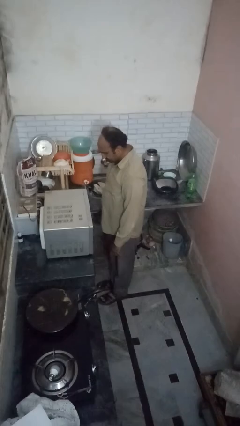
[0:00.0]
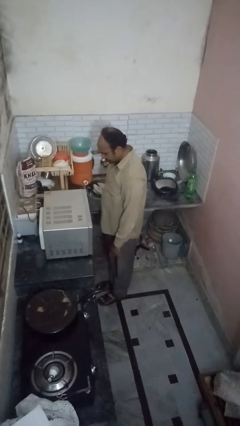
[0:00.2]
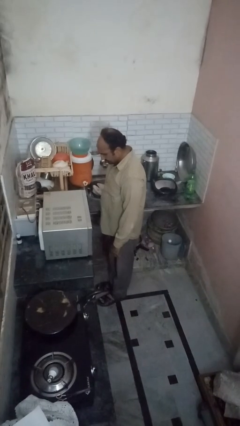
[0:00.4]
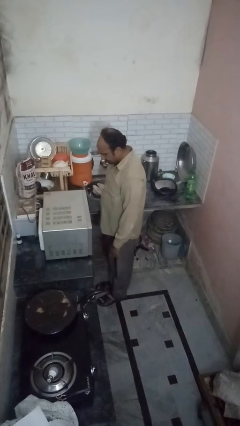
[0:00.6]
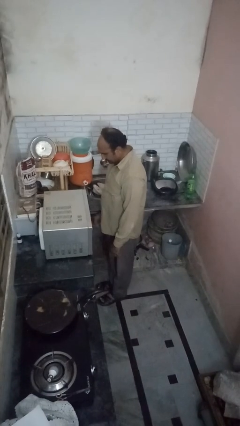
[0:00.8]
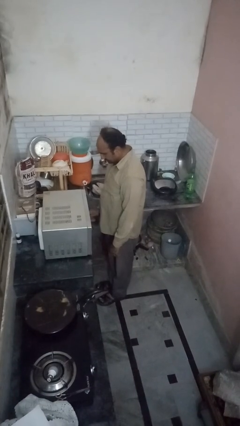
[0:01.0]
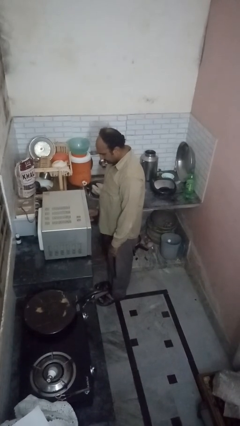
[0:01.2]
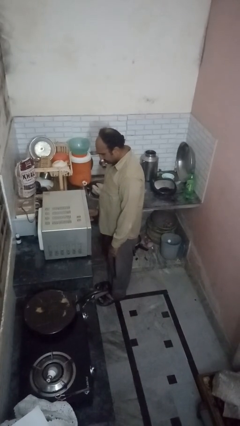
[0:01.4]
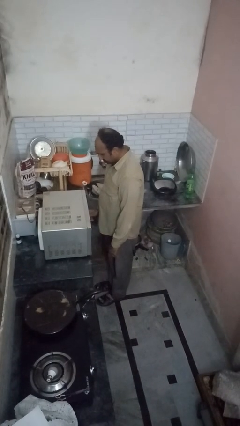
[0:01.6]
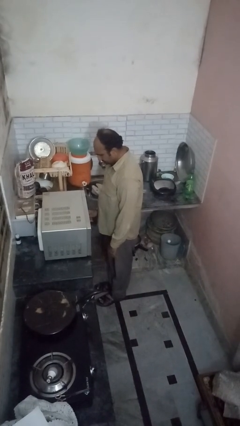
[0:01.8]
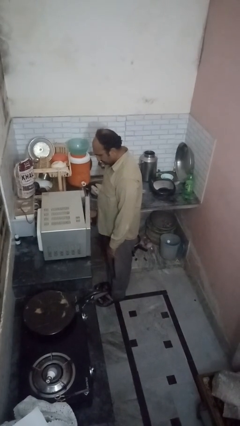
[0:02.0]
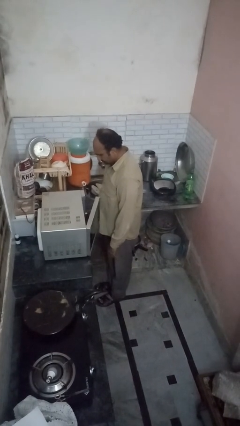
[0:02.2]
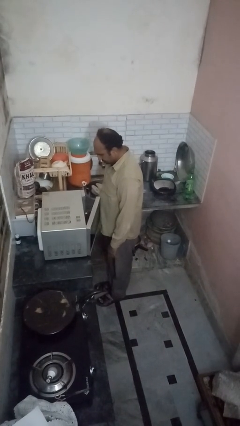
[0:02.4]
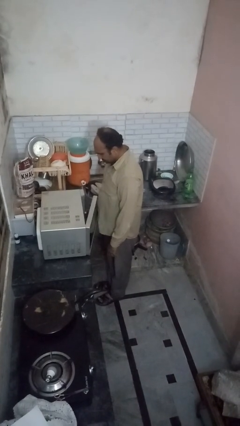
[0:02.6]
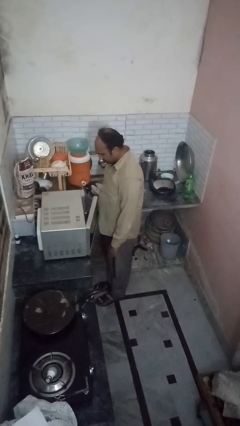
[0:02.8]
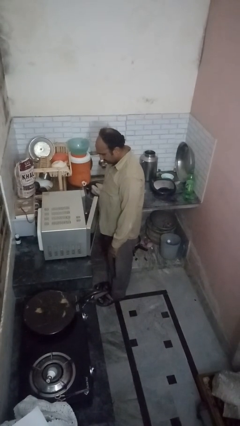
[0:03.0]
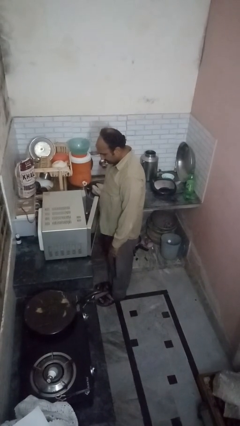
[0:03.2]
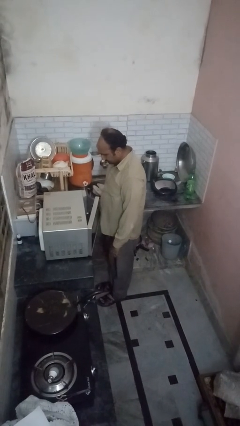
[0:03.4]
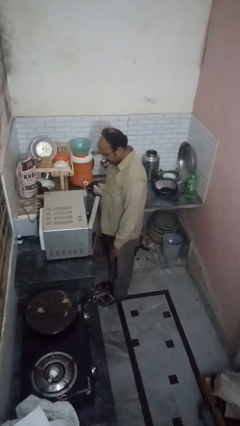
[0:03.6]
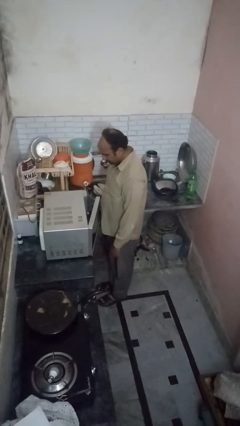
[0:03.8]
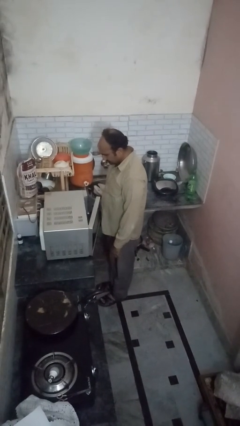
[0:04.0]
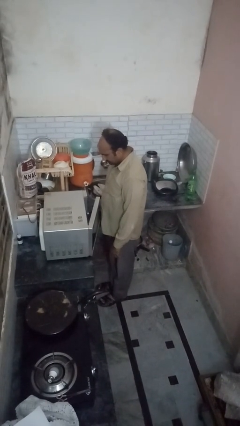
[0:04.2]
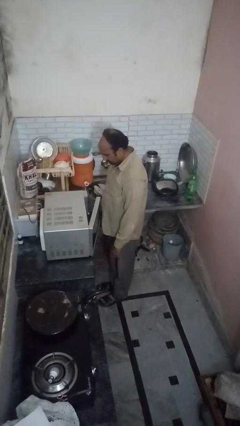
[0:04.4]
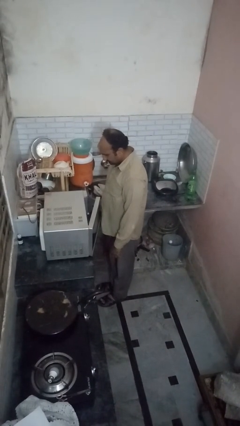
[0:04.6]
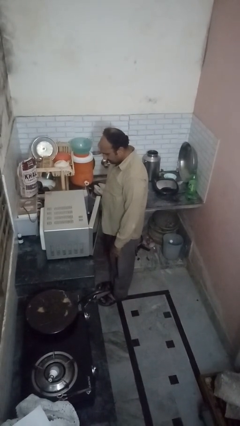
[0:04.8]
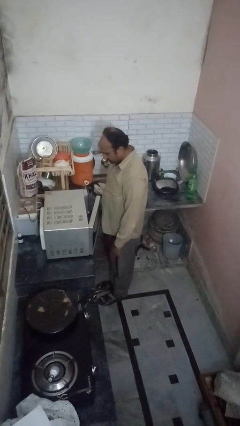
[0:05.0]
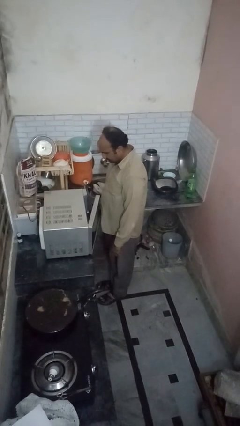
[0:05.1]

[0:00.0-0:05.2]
person opens oven door

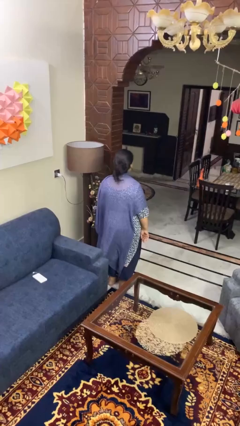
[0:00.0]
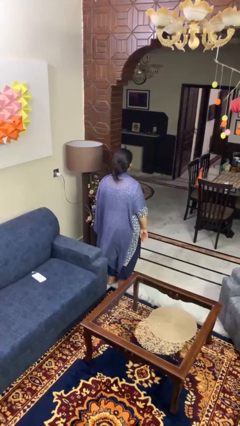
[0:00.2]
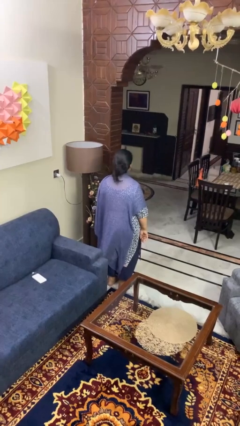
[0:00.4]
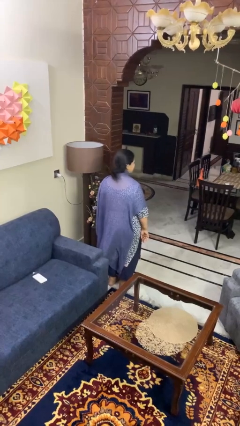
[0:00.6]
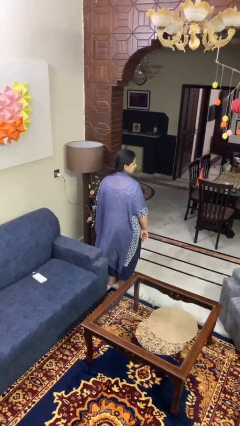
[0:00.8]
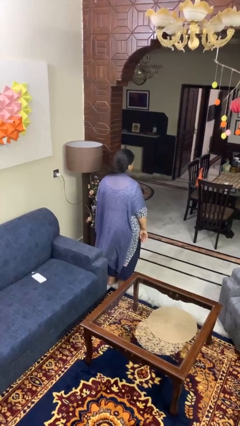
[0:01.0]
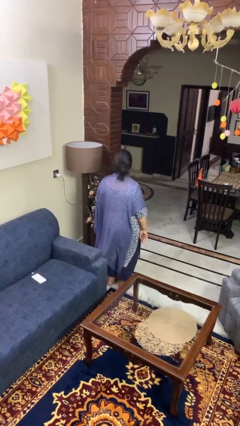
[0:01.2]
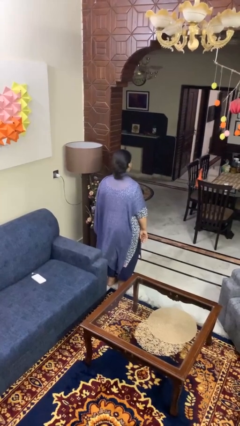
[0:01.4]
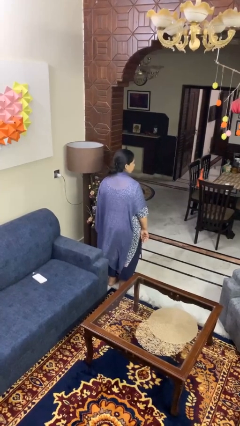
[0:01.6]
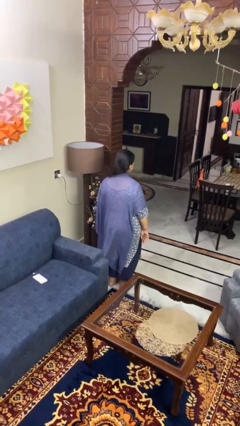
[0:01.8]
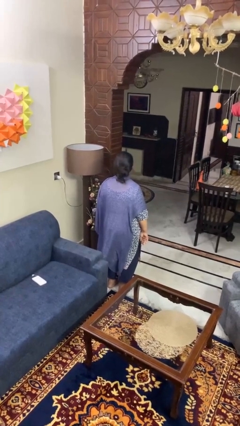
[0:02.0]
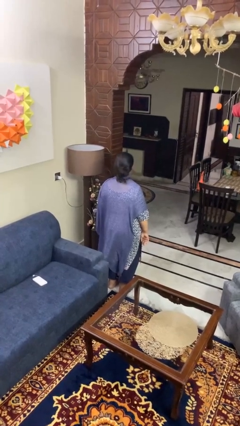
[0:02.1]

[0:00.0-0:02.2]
person shakes head

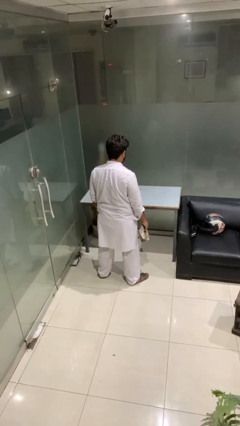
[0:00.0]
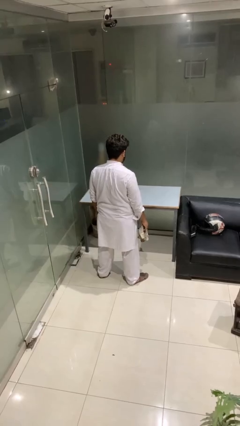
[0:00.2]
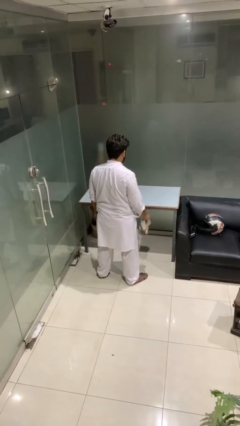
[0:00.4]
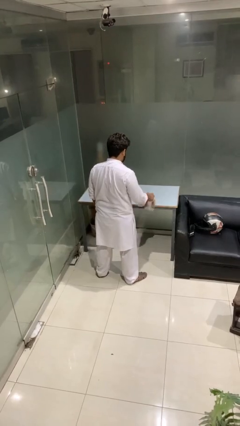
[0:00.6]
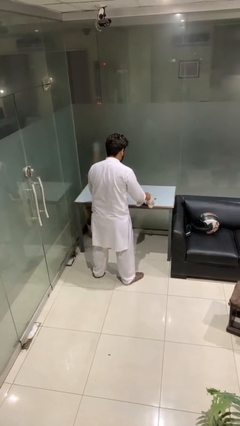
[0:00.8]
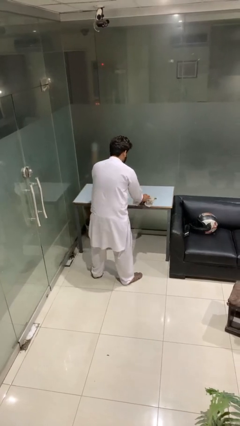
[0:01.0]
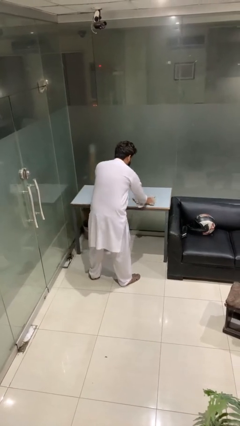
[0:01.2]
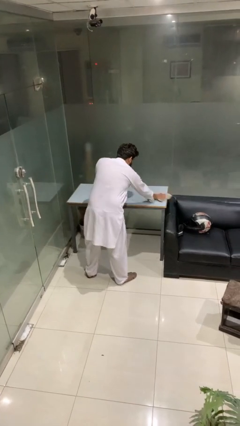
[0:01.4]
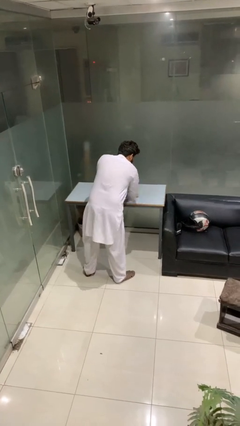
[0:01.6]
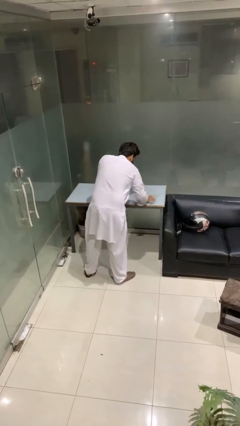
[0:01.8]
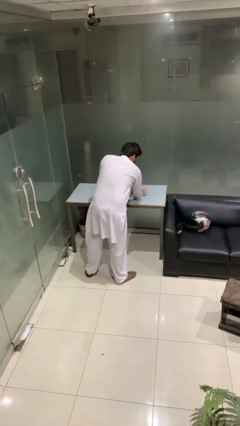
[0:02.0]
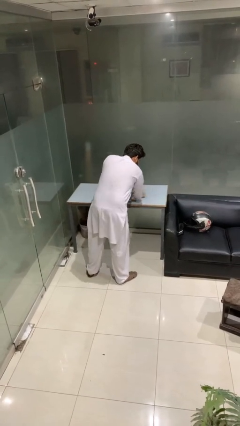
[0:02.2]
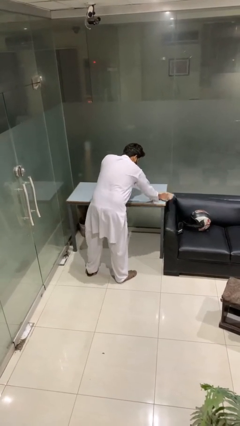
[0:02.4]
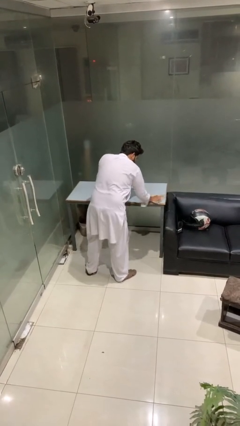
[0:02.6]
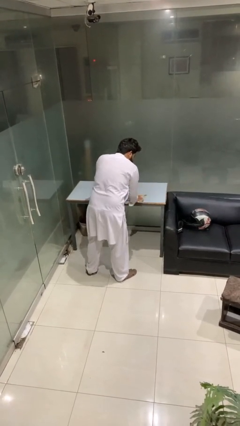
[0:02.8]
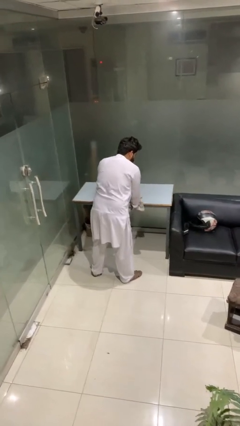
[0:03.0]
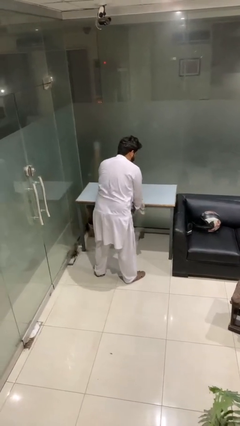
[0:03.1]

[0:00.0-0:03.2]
person cleans table with rag

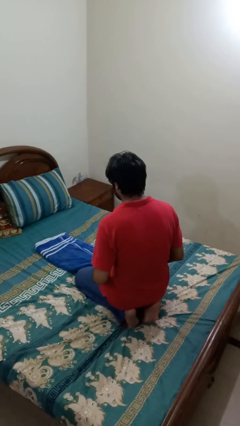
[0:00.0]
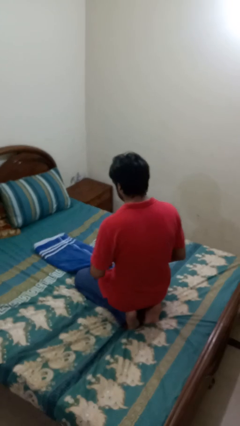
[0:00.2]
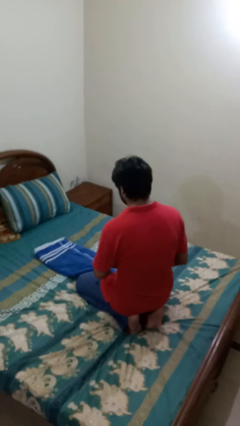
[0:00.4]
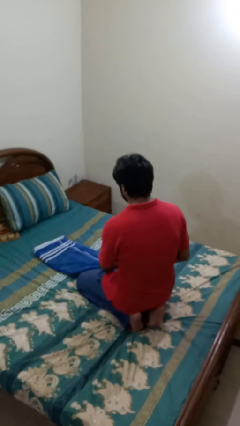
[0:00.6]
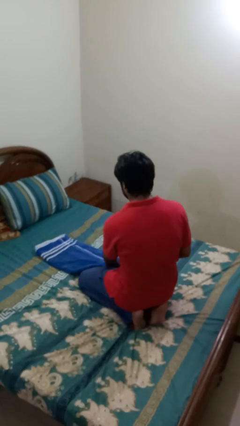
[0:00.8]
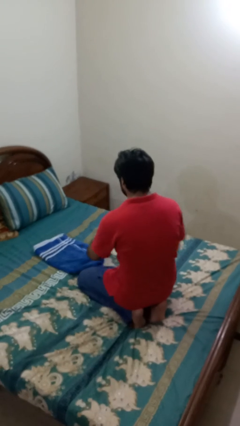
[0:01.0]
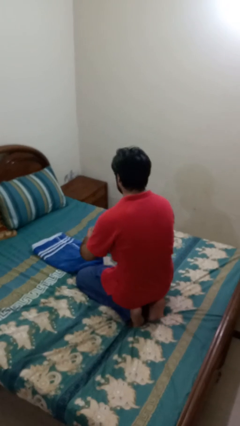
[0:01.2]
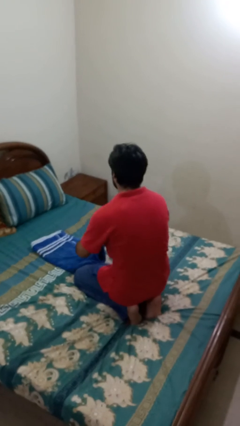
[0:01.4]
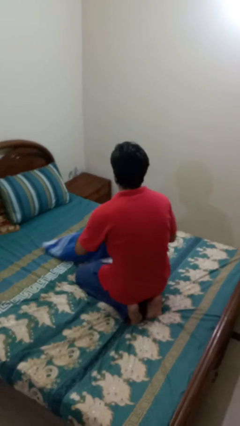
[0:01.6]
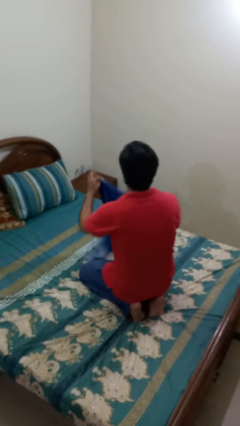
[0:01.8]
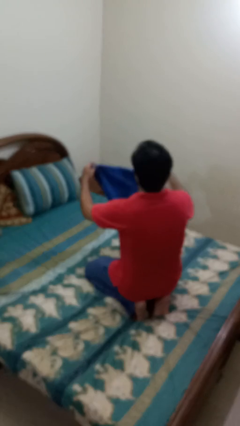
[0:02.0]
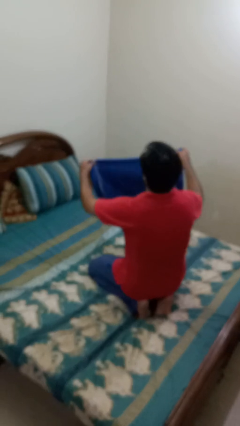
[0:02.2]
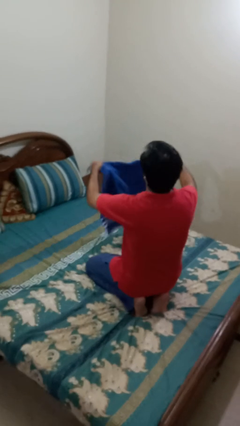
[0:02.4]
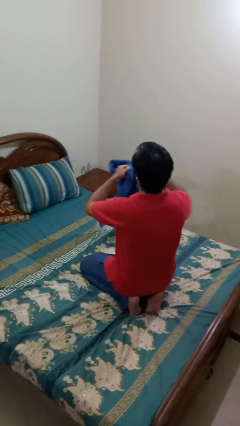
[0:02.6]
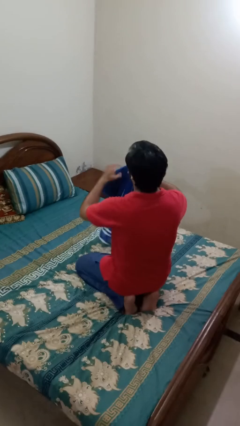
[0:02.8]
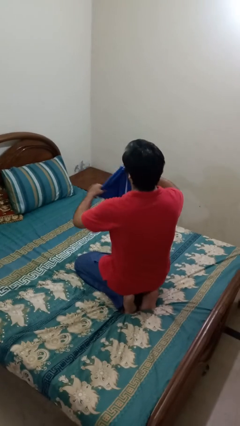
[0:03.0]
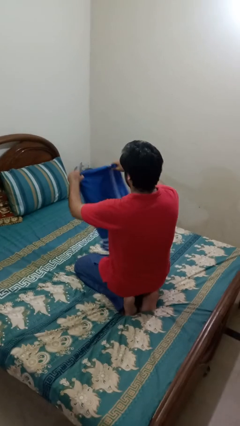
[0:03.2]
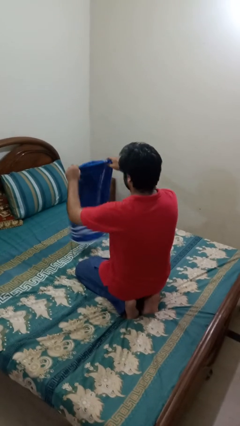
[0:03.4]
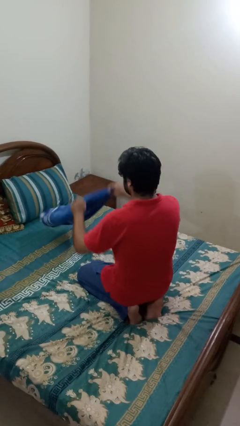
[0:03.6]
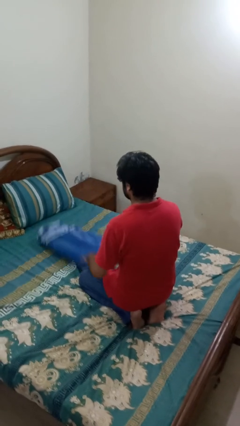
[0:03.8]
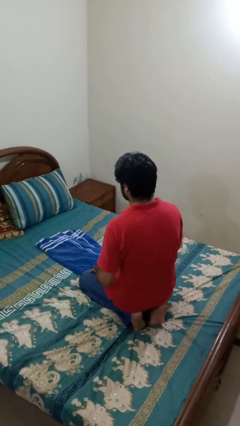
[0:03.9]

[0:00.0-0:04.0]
person folds towel

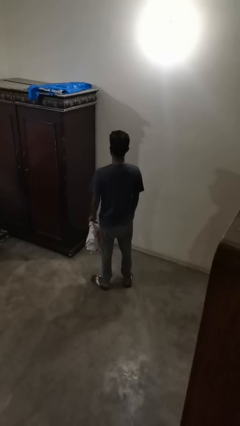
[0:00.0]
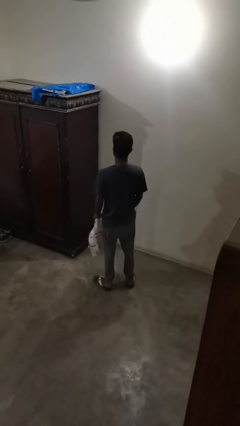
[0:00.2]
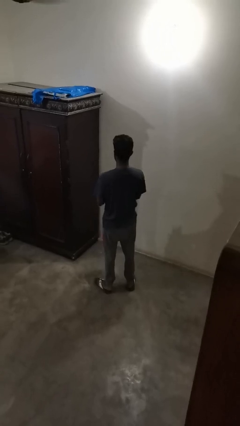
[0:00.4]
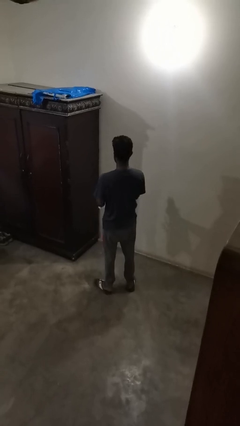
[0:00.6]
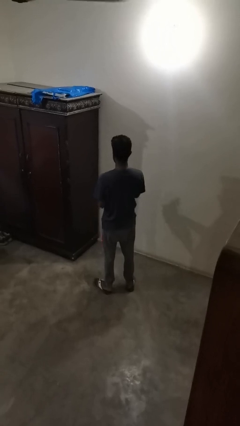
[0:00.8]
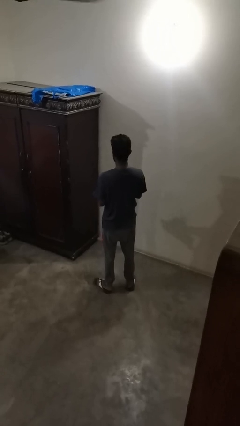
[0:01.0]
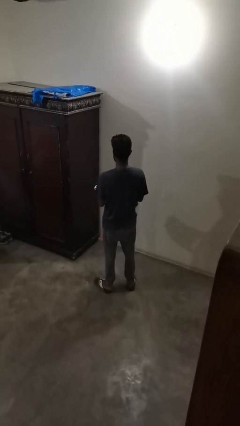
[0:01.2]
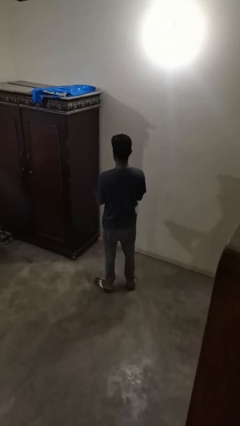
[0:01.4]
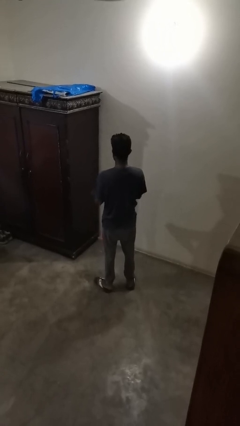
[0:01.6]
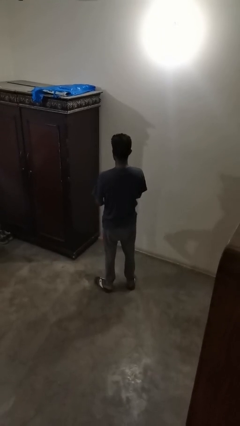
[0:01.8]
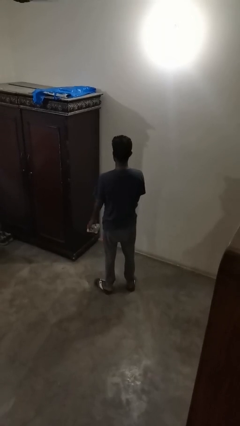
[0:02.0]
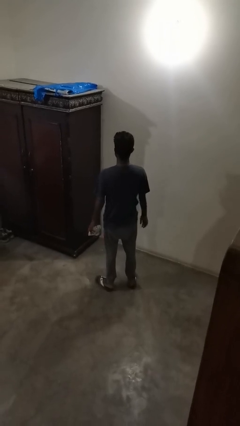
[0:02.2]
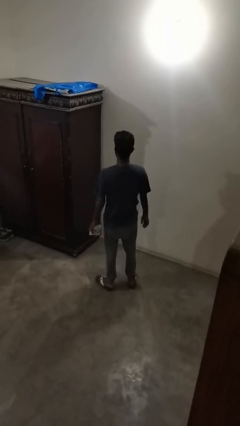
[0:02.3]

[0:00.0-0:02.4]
person crumples paper

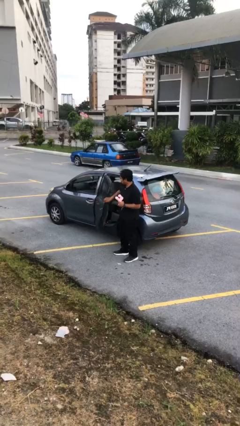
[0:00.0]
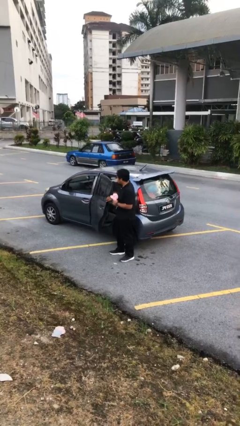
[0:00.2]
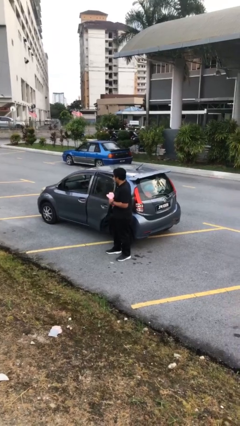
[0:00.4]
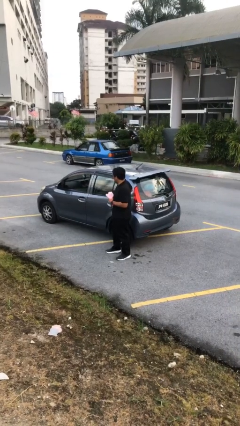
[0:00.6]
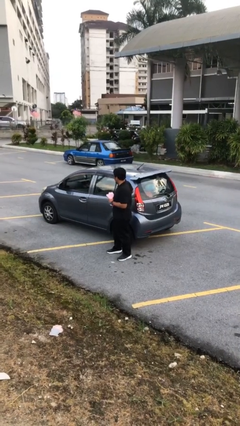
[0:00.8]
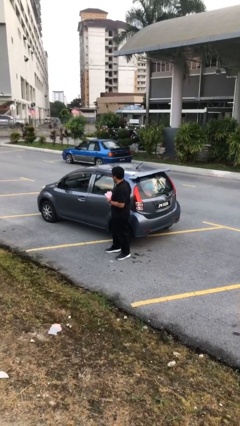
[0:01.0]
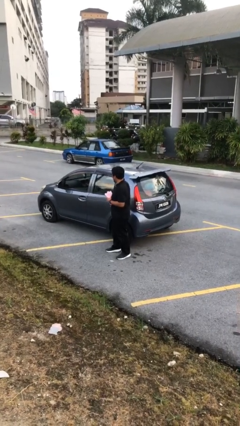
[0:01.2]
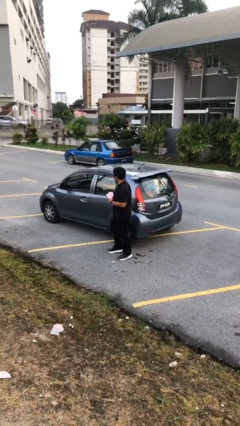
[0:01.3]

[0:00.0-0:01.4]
person closes car door
